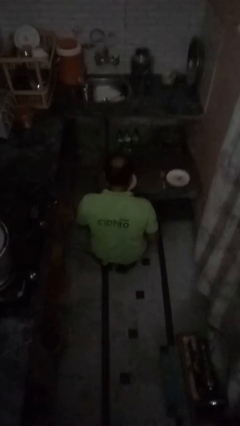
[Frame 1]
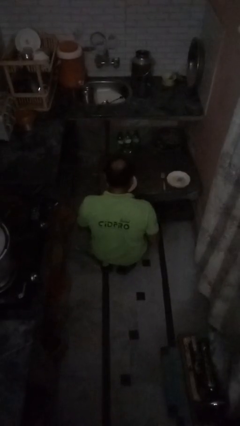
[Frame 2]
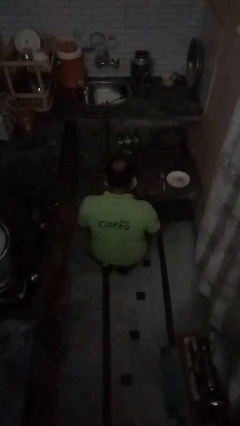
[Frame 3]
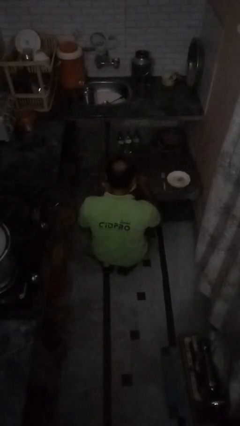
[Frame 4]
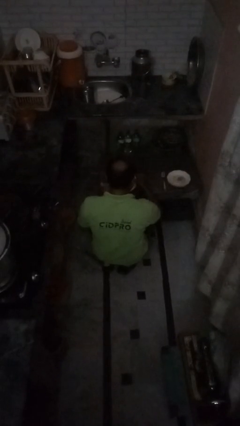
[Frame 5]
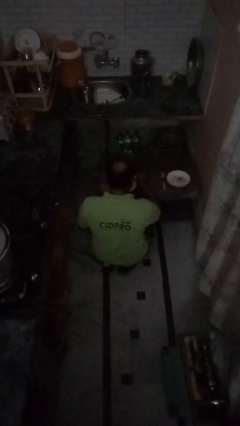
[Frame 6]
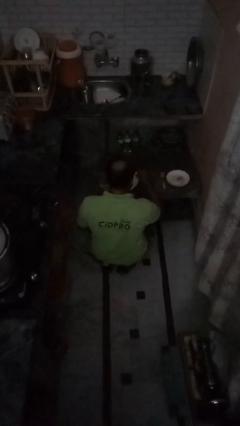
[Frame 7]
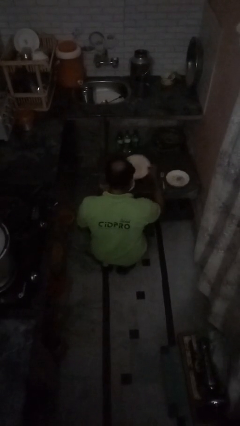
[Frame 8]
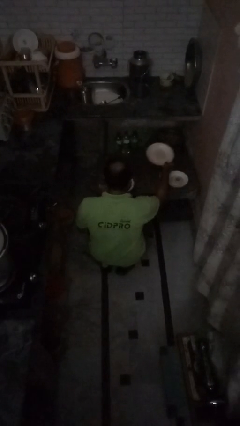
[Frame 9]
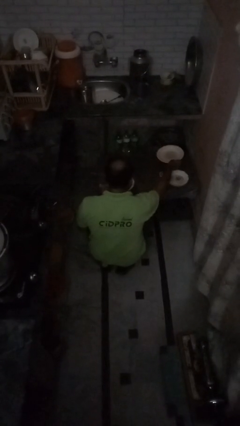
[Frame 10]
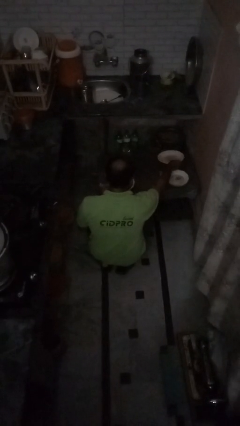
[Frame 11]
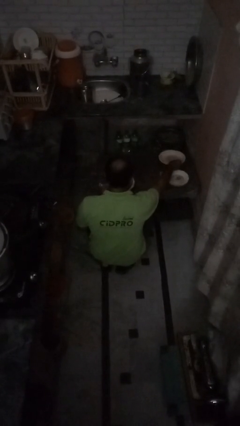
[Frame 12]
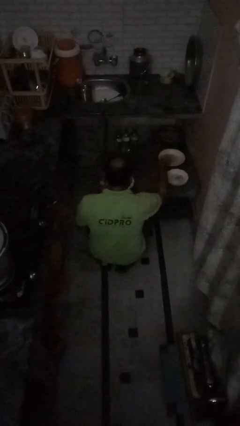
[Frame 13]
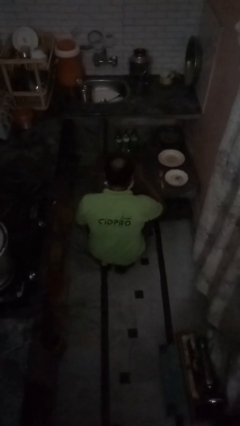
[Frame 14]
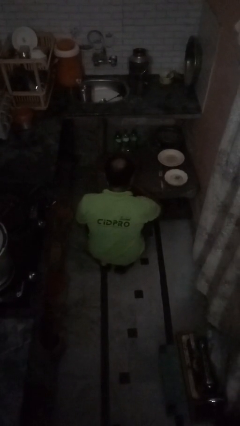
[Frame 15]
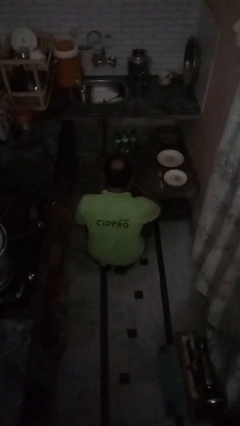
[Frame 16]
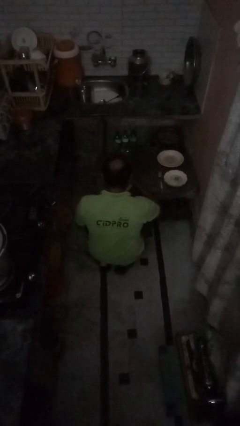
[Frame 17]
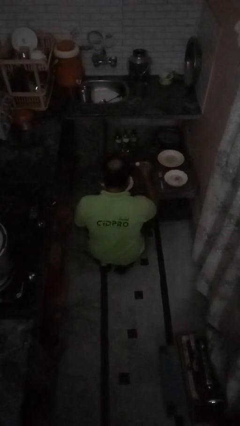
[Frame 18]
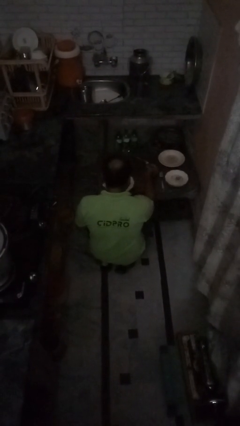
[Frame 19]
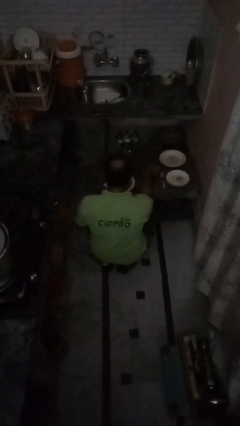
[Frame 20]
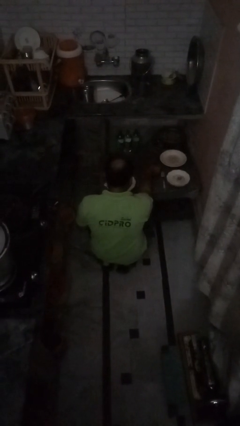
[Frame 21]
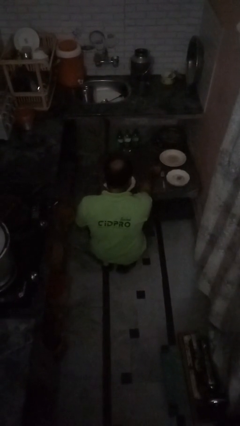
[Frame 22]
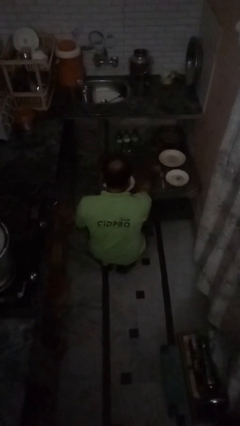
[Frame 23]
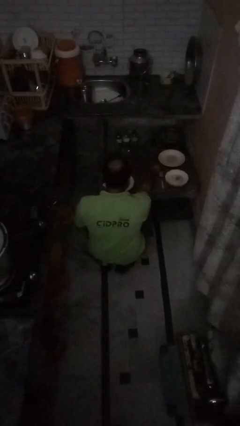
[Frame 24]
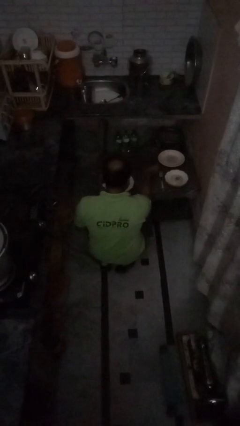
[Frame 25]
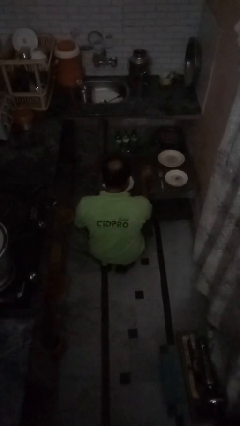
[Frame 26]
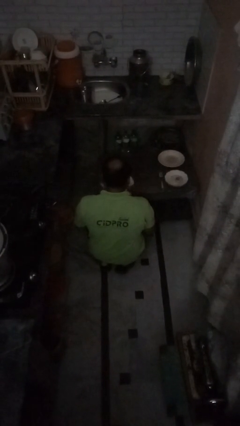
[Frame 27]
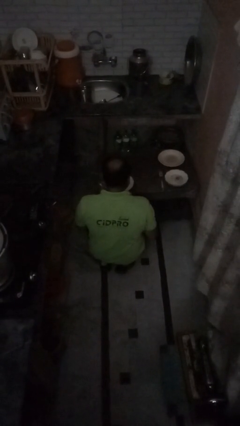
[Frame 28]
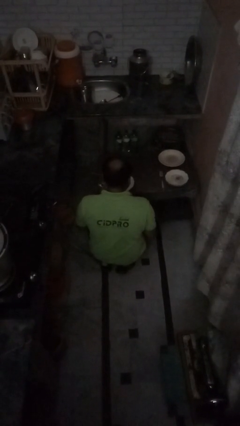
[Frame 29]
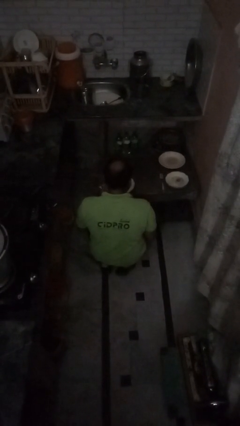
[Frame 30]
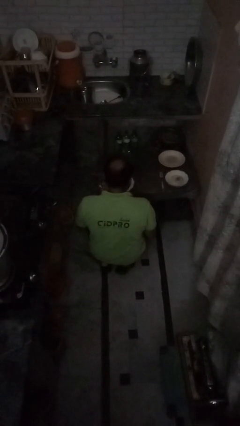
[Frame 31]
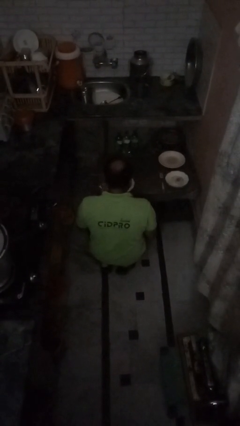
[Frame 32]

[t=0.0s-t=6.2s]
person sets table

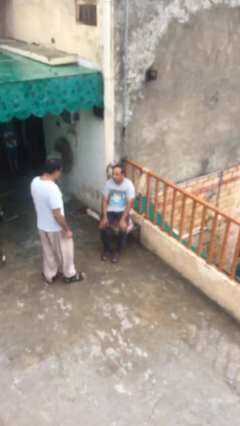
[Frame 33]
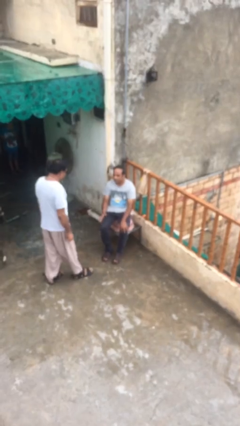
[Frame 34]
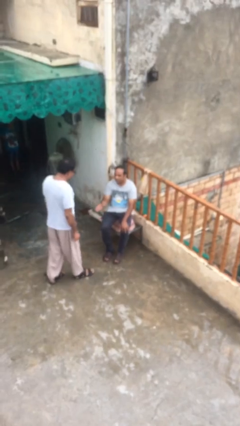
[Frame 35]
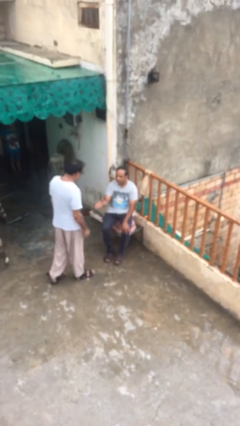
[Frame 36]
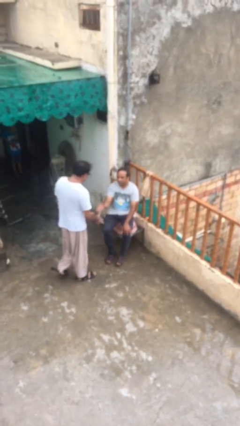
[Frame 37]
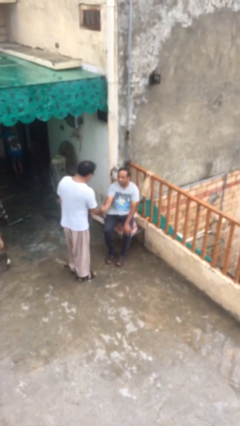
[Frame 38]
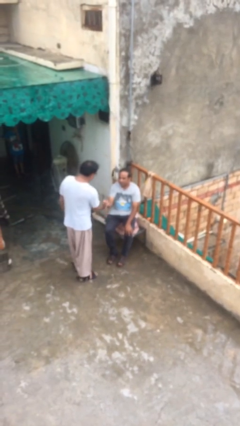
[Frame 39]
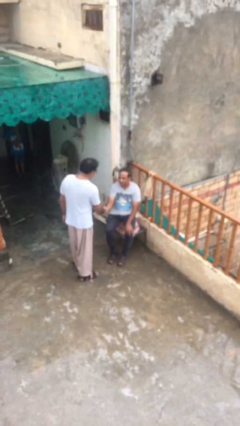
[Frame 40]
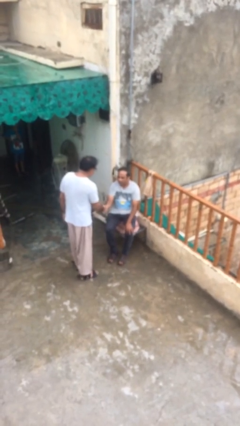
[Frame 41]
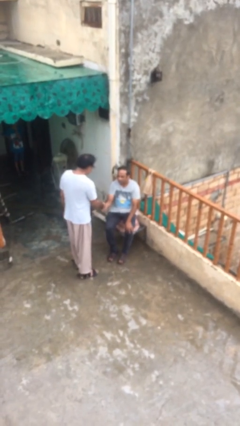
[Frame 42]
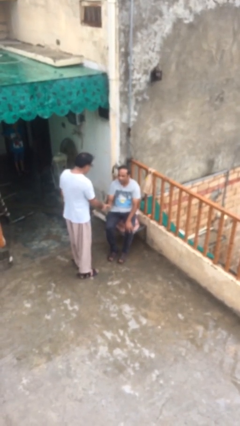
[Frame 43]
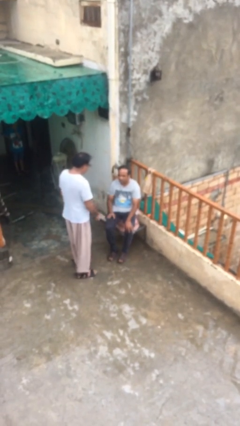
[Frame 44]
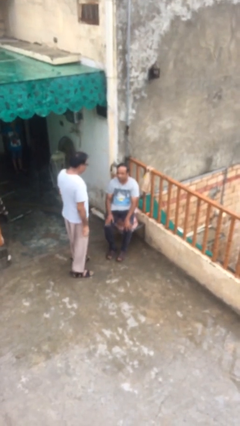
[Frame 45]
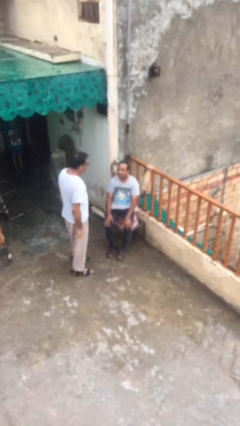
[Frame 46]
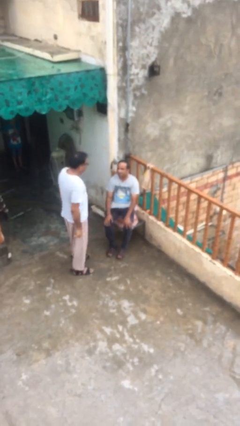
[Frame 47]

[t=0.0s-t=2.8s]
person shakes hand

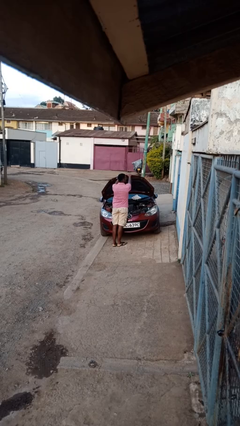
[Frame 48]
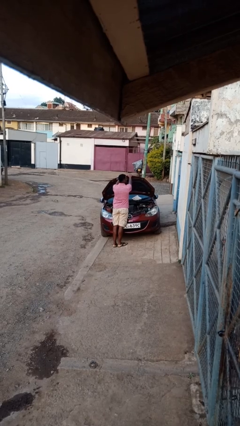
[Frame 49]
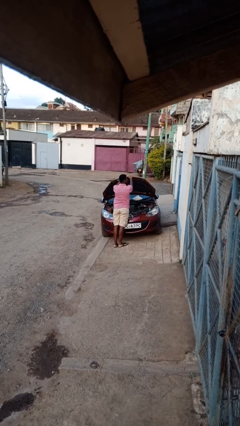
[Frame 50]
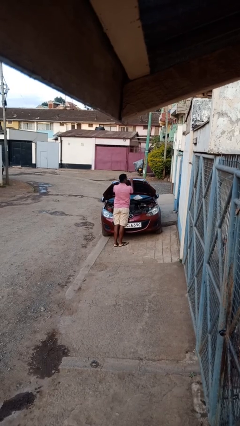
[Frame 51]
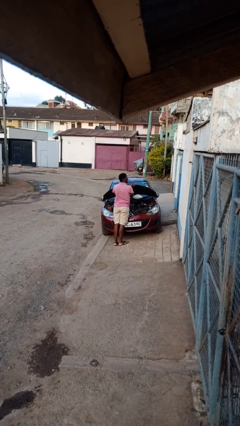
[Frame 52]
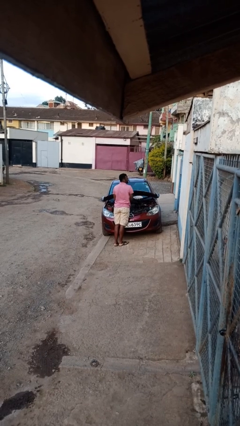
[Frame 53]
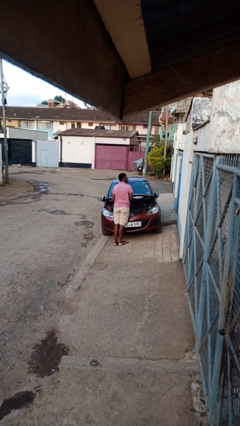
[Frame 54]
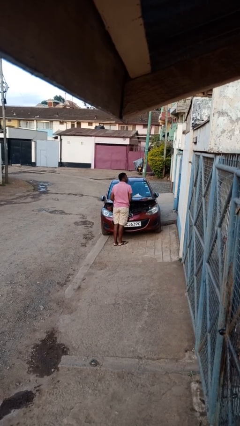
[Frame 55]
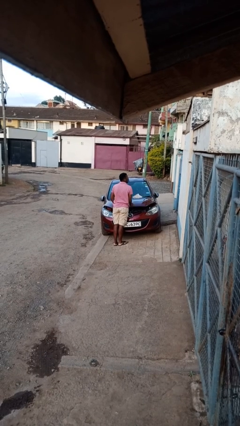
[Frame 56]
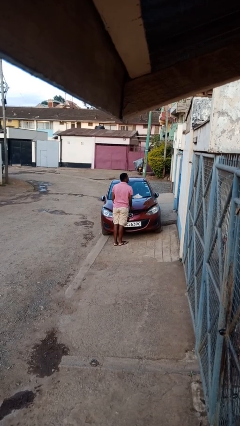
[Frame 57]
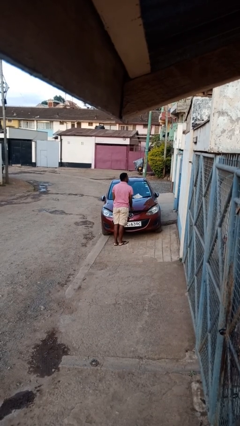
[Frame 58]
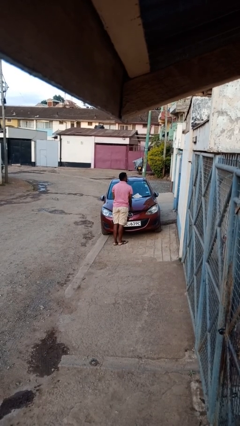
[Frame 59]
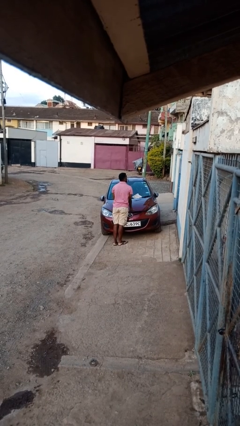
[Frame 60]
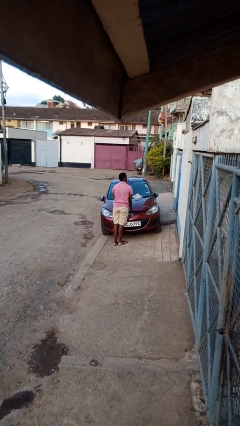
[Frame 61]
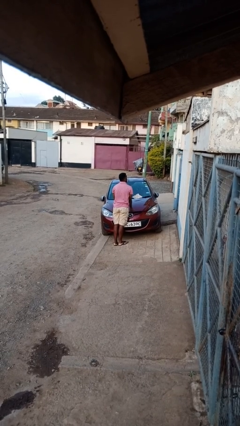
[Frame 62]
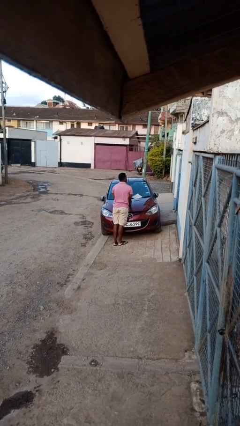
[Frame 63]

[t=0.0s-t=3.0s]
person closes car hood

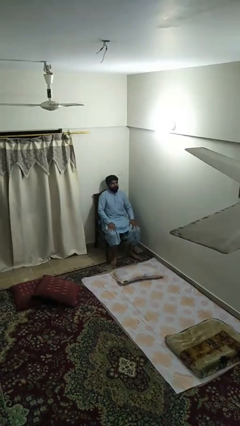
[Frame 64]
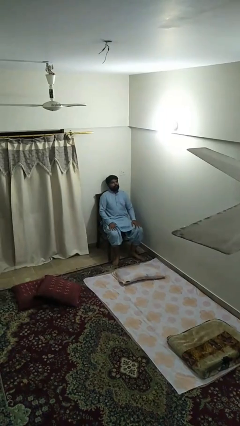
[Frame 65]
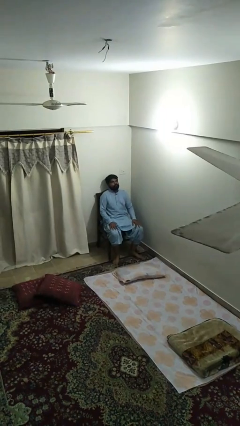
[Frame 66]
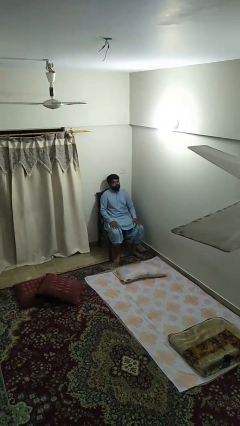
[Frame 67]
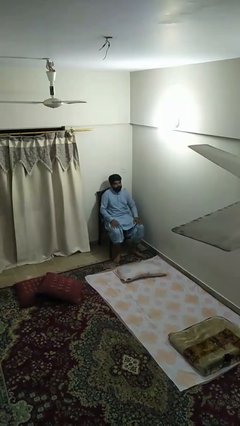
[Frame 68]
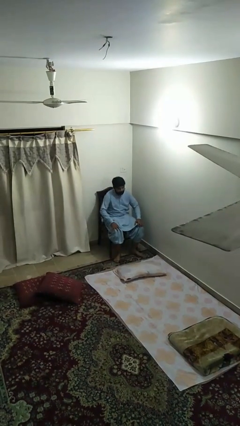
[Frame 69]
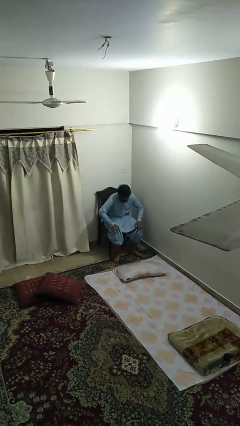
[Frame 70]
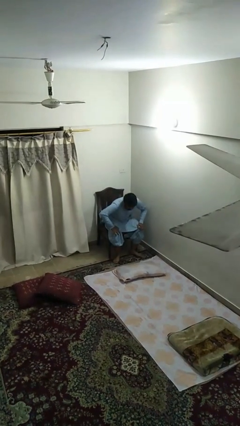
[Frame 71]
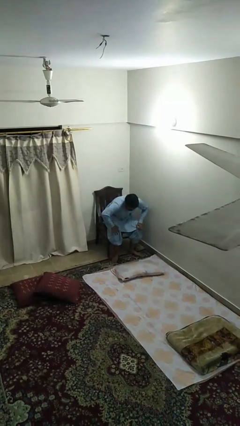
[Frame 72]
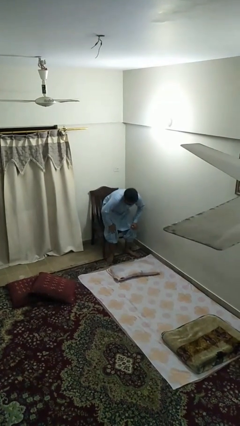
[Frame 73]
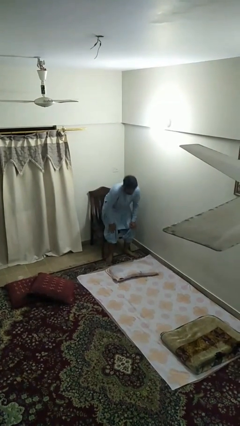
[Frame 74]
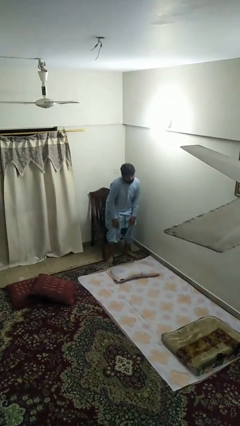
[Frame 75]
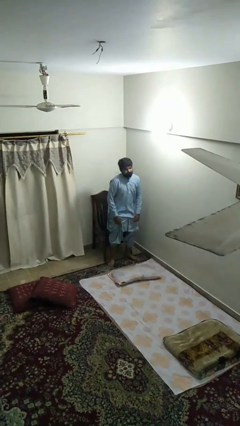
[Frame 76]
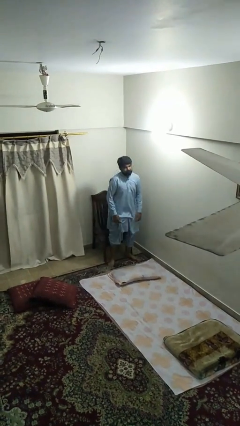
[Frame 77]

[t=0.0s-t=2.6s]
person stands up

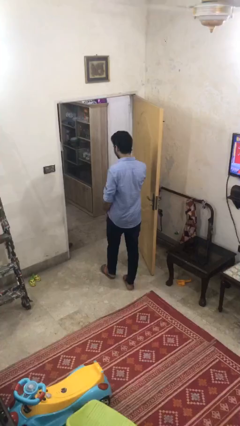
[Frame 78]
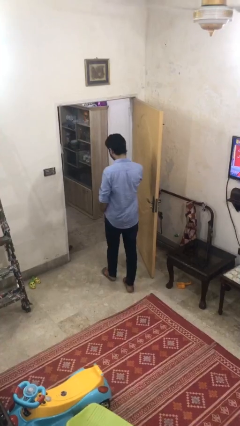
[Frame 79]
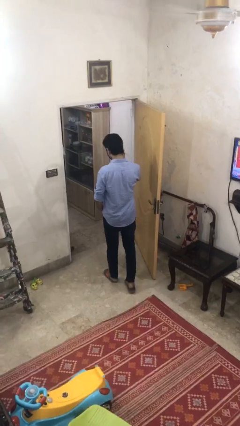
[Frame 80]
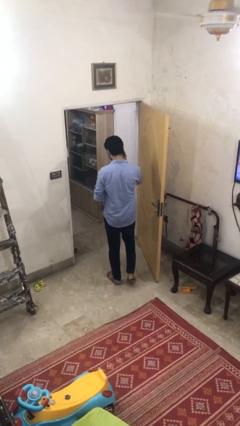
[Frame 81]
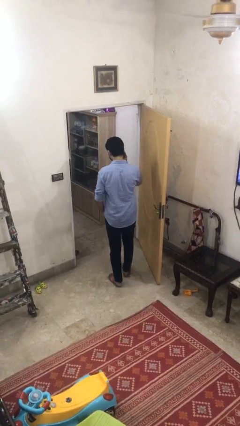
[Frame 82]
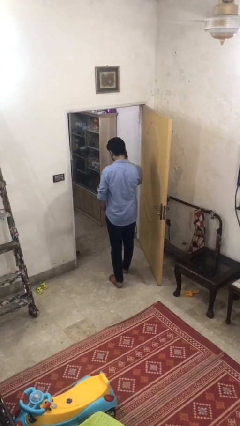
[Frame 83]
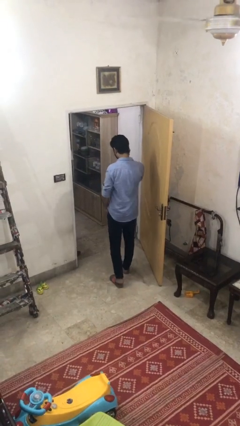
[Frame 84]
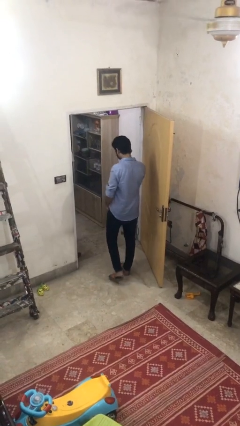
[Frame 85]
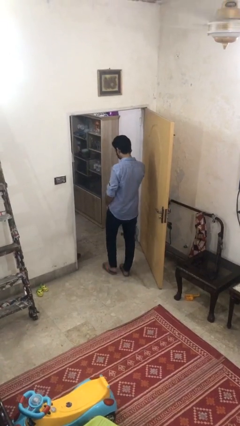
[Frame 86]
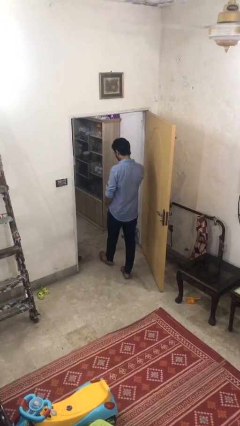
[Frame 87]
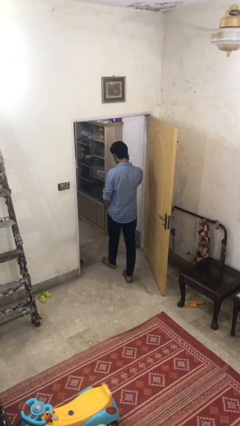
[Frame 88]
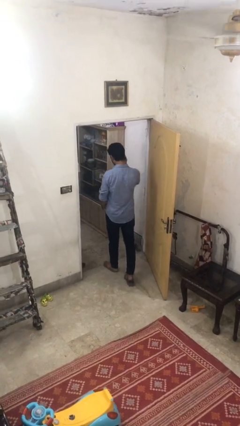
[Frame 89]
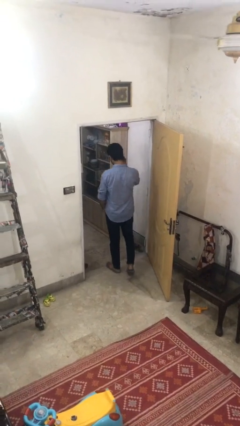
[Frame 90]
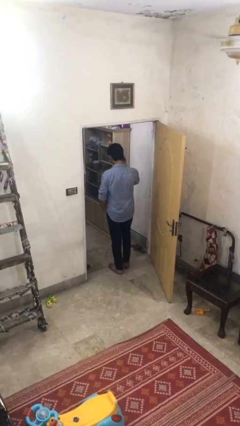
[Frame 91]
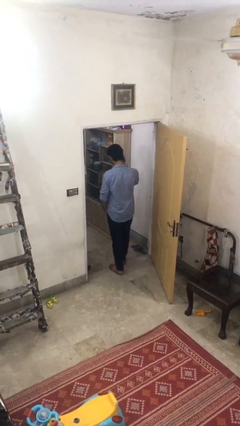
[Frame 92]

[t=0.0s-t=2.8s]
person exits scene through structure
